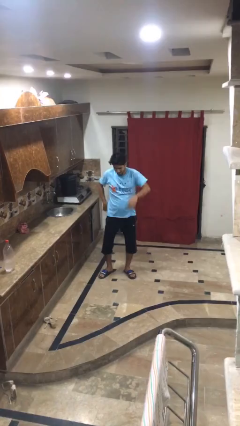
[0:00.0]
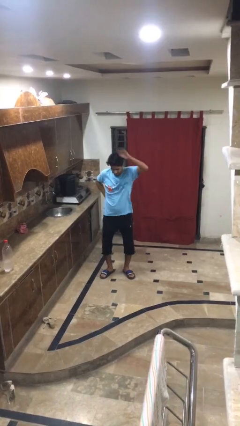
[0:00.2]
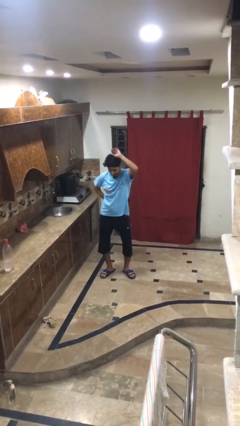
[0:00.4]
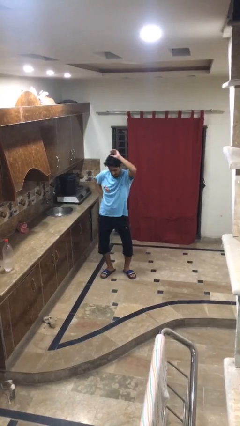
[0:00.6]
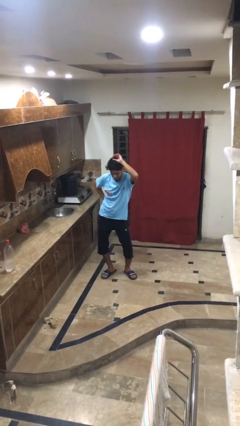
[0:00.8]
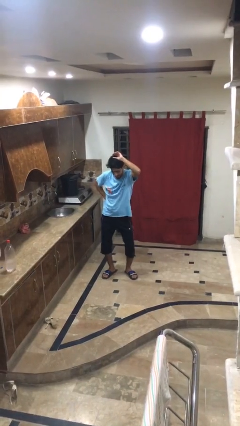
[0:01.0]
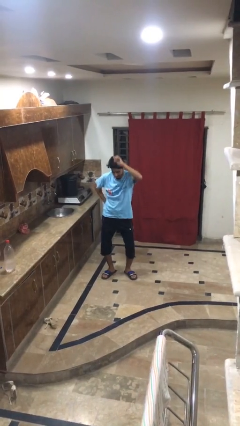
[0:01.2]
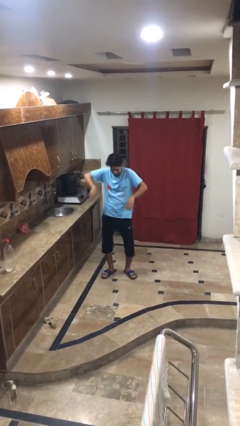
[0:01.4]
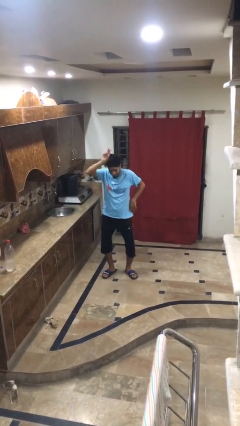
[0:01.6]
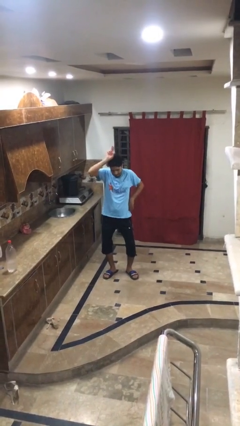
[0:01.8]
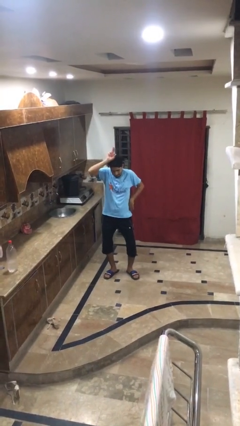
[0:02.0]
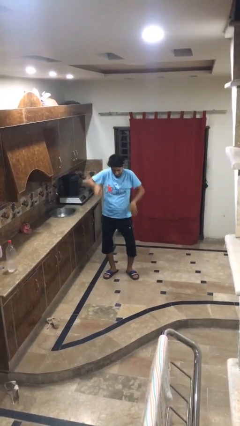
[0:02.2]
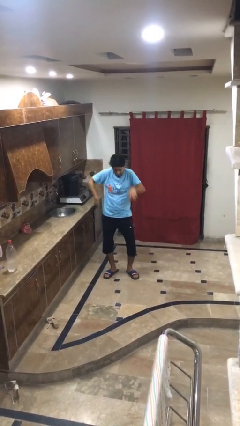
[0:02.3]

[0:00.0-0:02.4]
person dances in place

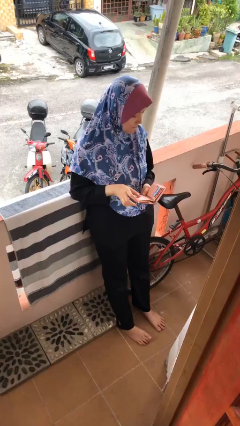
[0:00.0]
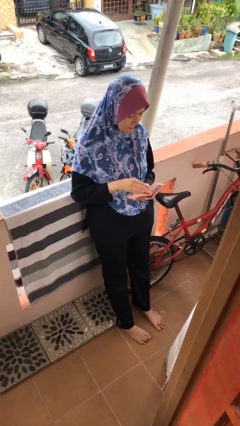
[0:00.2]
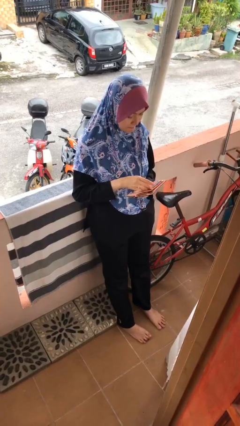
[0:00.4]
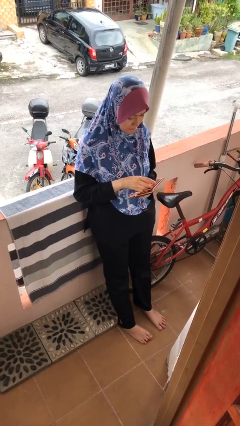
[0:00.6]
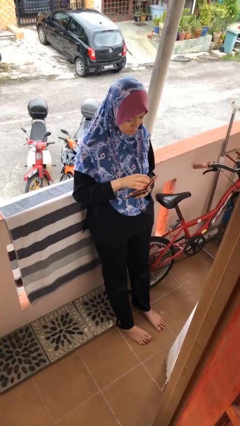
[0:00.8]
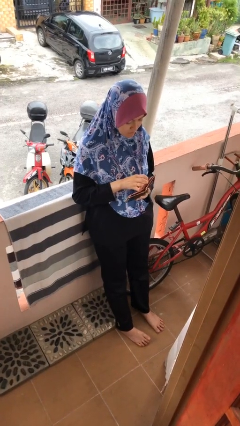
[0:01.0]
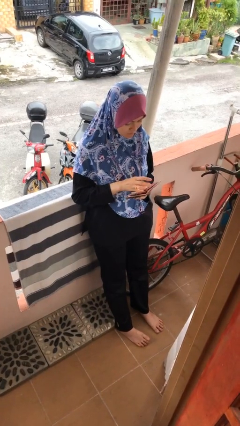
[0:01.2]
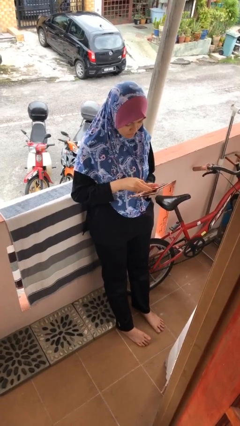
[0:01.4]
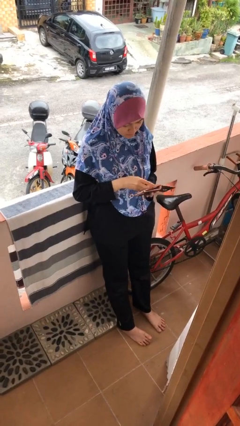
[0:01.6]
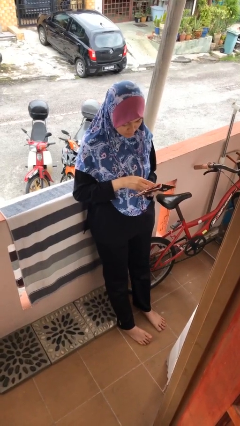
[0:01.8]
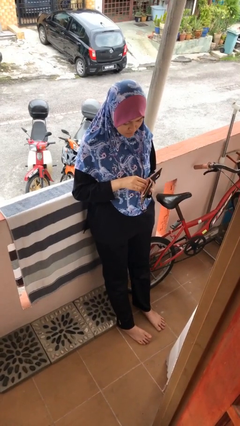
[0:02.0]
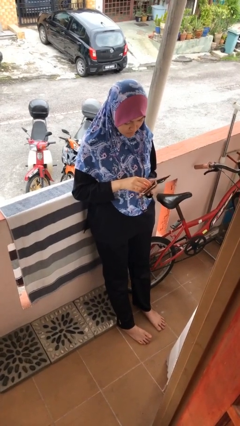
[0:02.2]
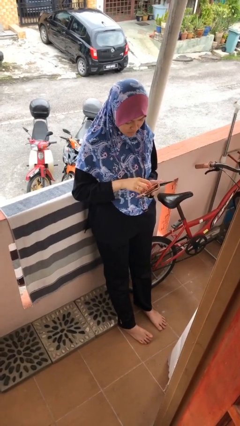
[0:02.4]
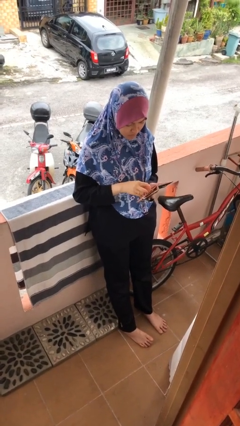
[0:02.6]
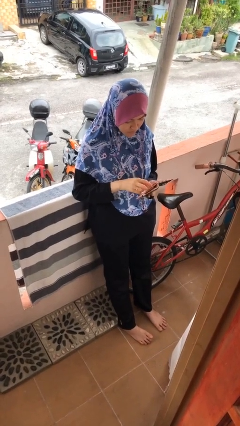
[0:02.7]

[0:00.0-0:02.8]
person searches in purse

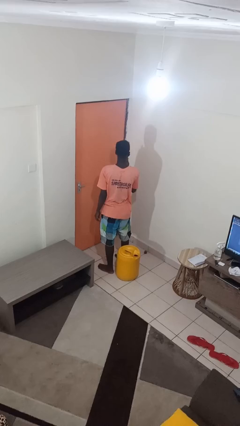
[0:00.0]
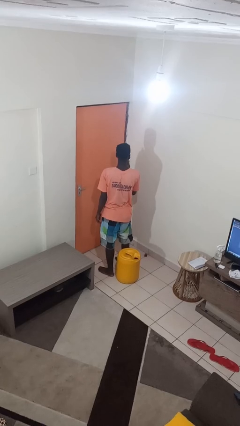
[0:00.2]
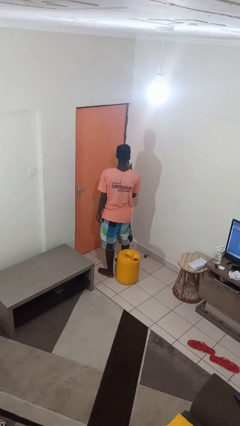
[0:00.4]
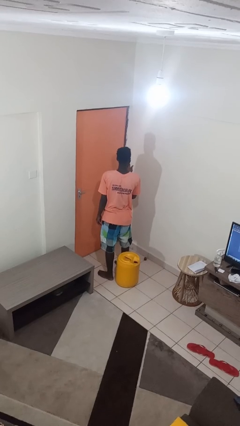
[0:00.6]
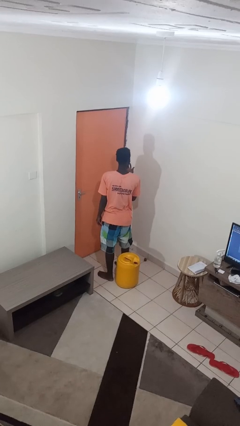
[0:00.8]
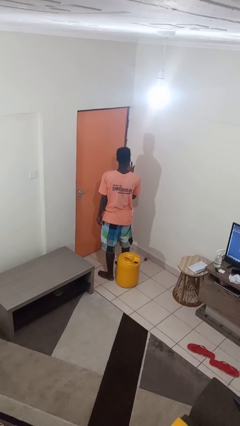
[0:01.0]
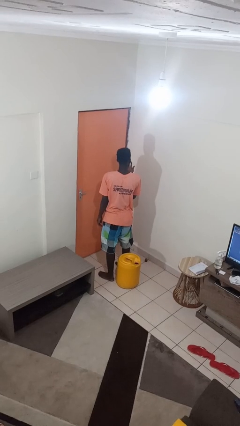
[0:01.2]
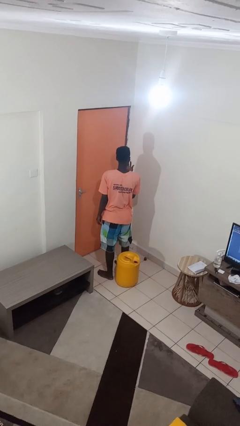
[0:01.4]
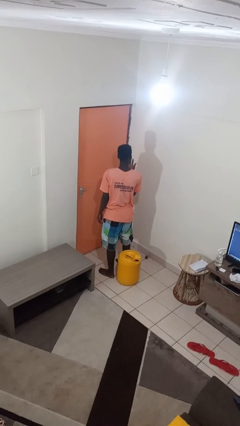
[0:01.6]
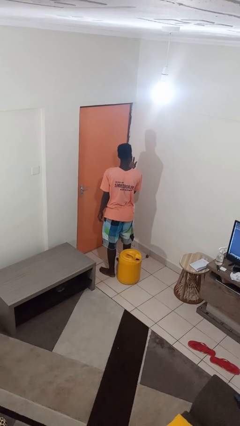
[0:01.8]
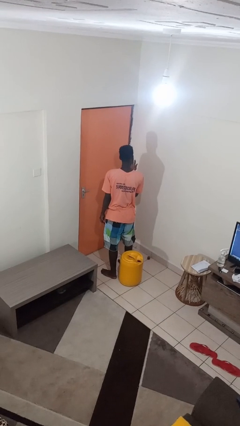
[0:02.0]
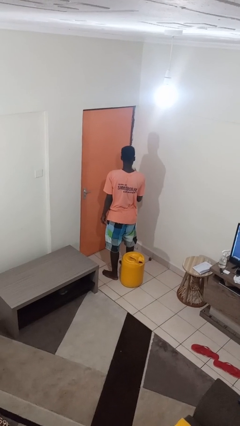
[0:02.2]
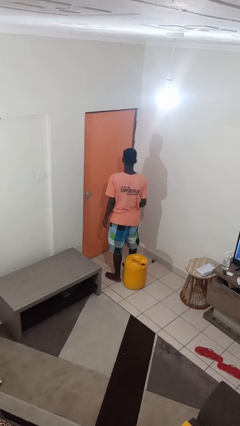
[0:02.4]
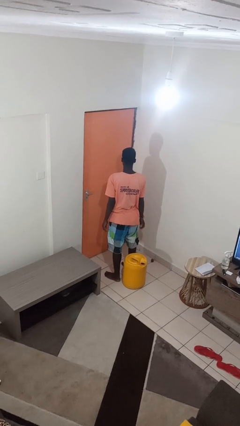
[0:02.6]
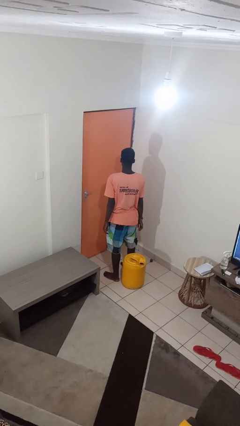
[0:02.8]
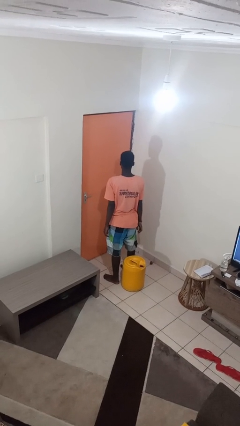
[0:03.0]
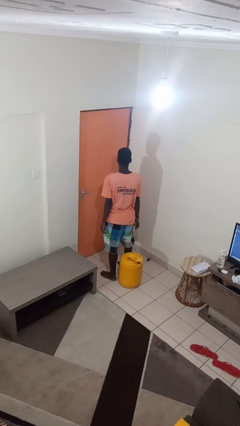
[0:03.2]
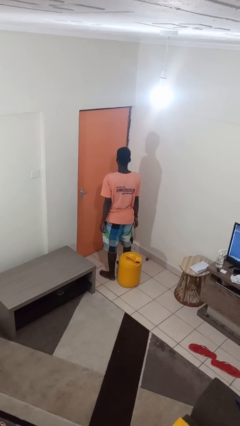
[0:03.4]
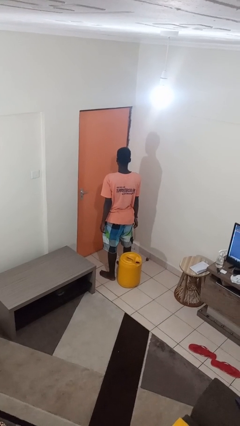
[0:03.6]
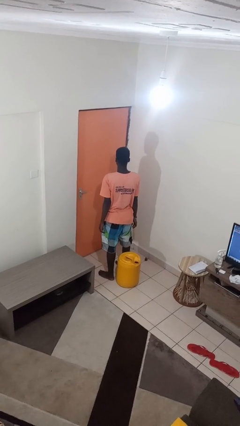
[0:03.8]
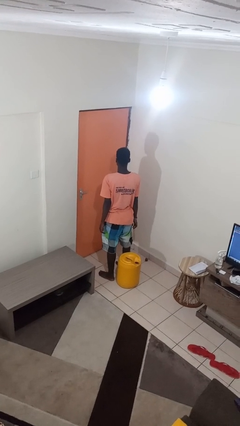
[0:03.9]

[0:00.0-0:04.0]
person licks fingers

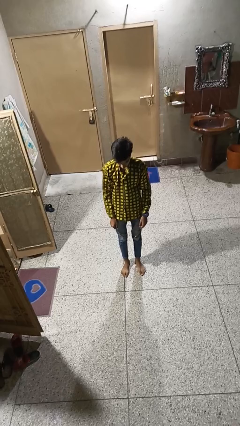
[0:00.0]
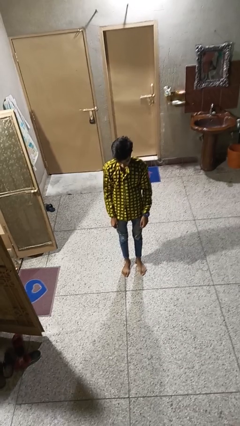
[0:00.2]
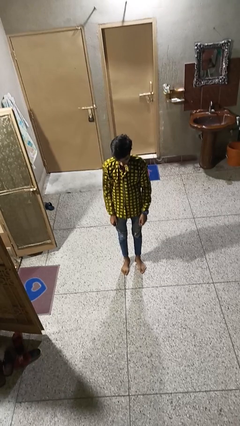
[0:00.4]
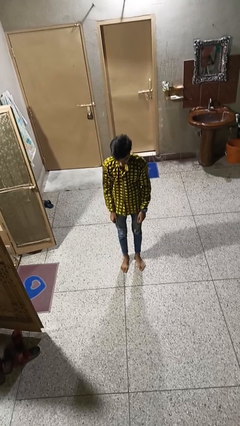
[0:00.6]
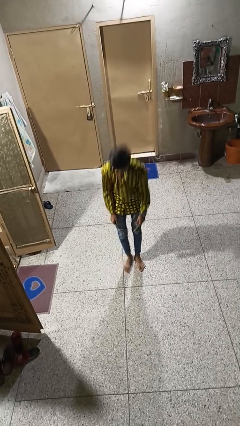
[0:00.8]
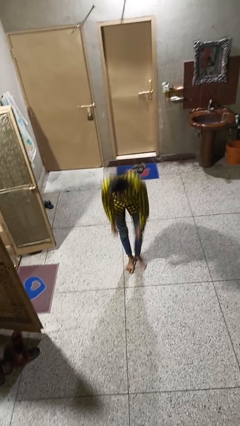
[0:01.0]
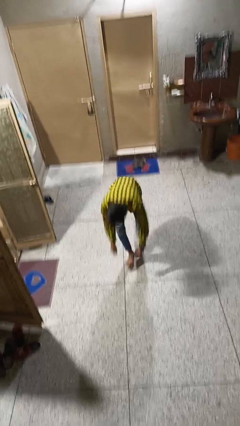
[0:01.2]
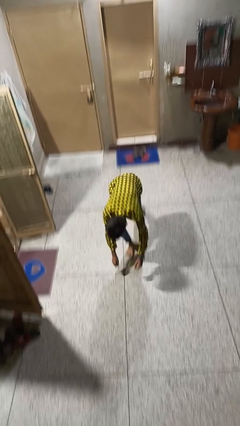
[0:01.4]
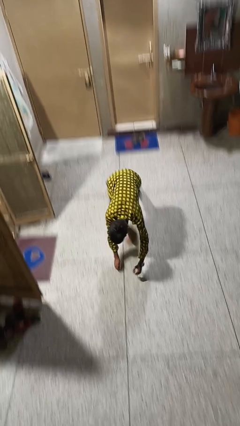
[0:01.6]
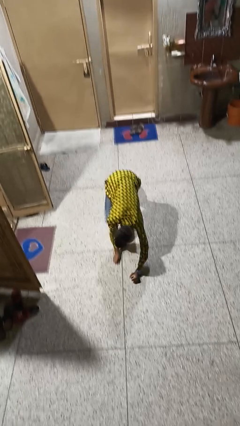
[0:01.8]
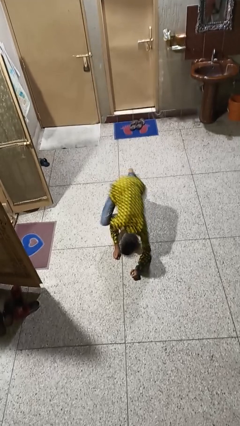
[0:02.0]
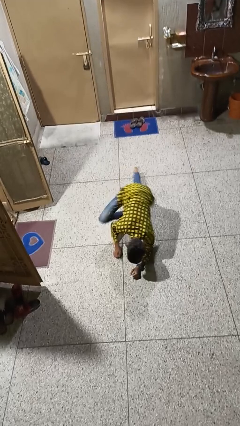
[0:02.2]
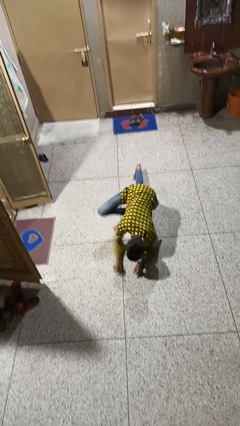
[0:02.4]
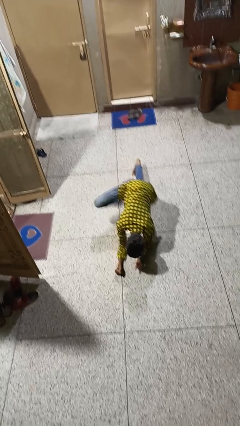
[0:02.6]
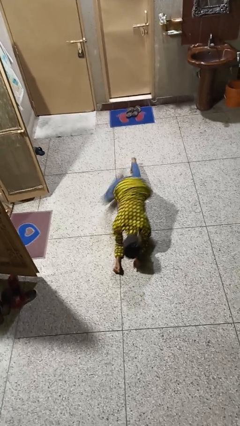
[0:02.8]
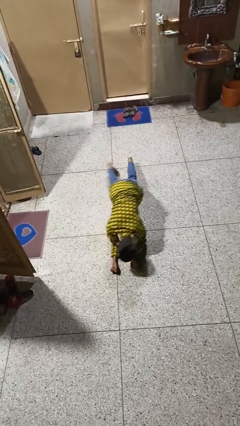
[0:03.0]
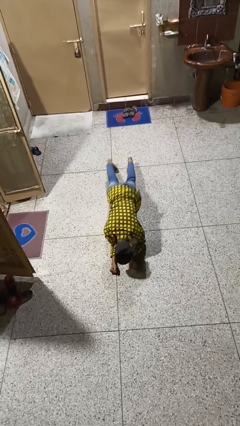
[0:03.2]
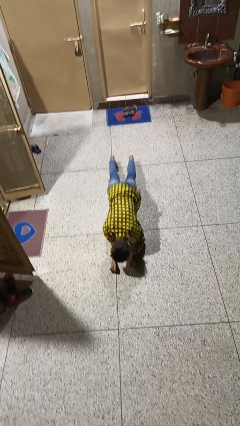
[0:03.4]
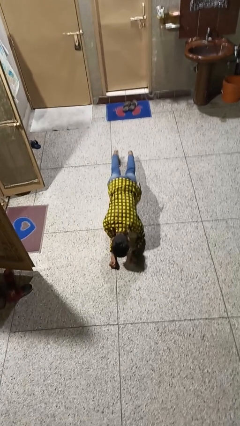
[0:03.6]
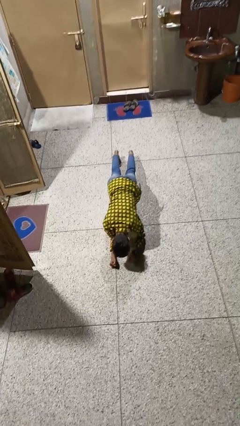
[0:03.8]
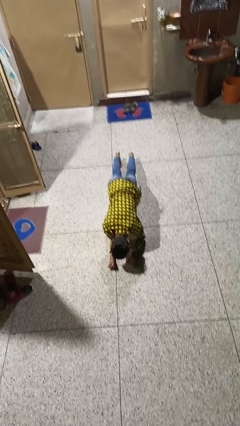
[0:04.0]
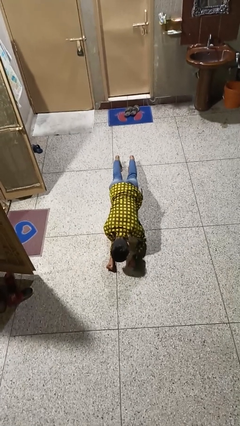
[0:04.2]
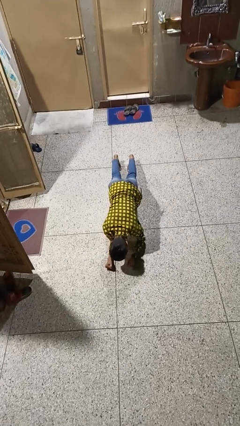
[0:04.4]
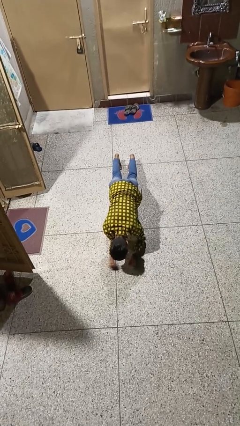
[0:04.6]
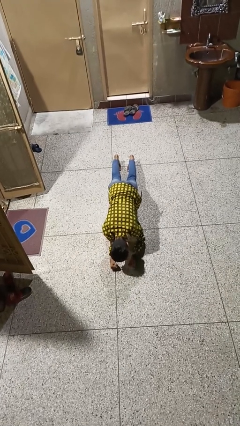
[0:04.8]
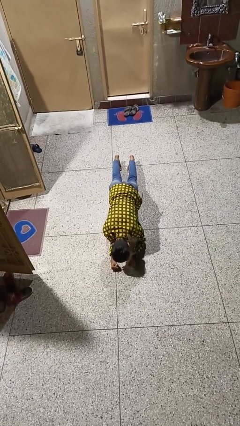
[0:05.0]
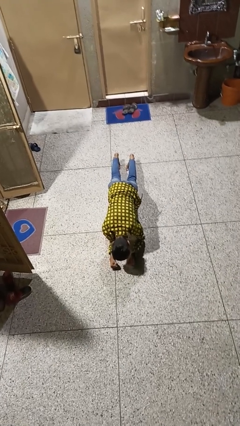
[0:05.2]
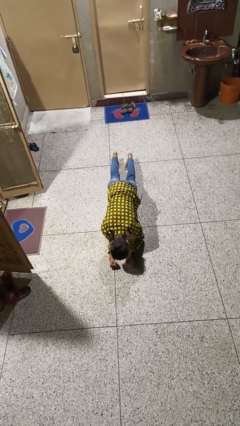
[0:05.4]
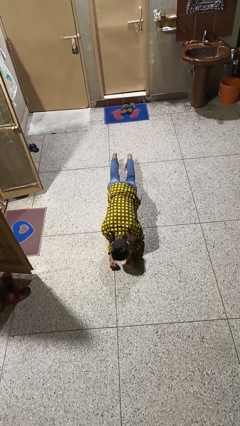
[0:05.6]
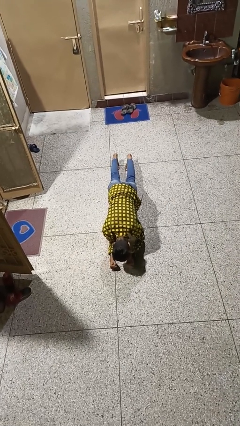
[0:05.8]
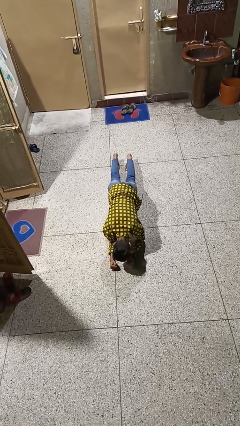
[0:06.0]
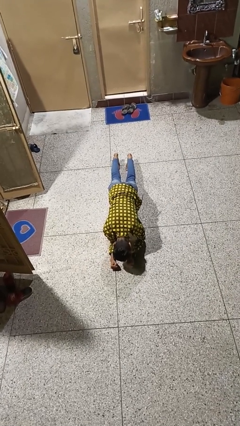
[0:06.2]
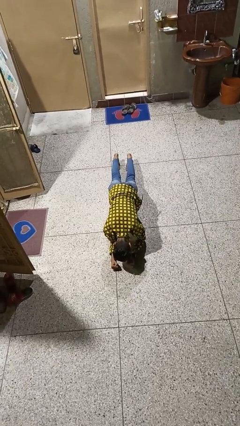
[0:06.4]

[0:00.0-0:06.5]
person exercises with plank

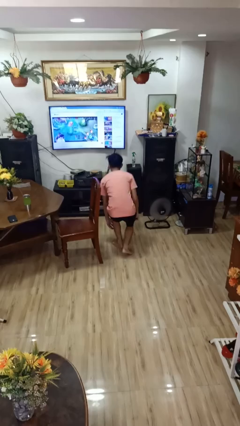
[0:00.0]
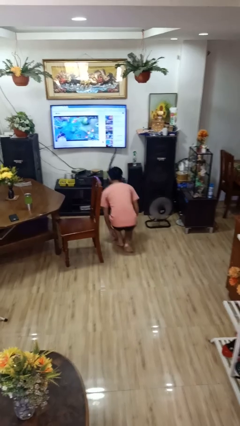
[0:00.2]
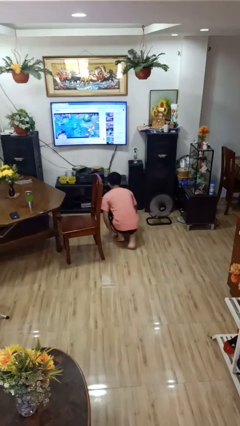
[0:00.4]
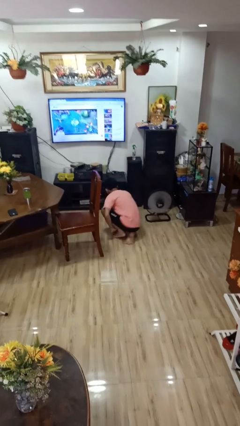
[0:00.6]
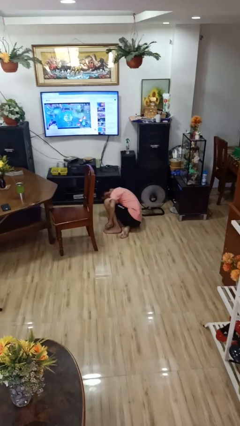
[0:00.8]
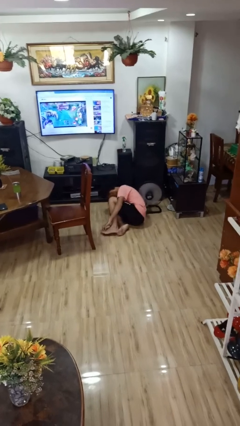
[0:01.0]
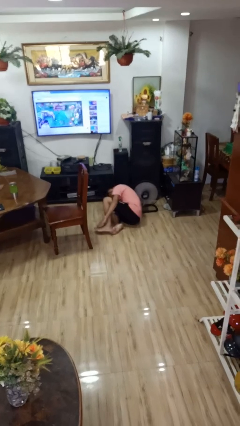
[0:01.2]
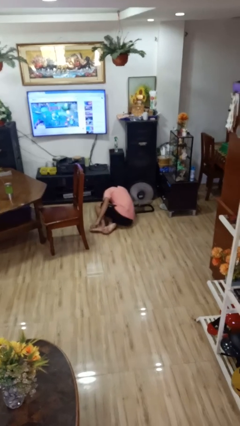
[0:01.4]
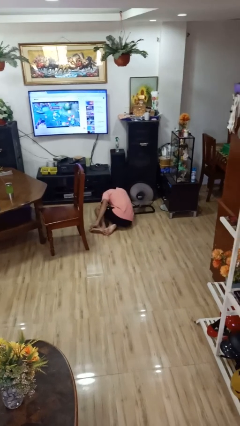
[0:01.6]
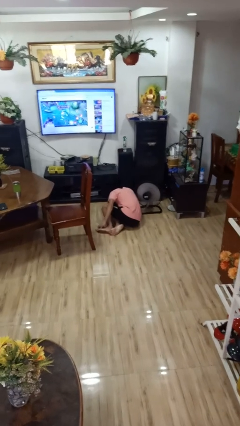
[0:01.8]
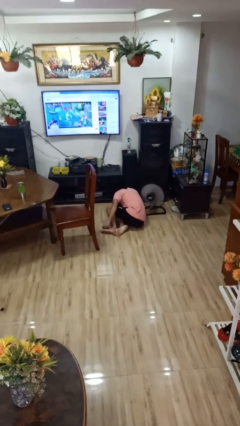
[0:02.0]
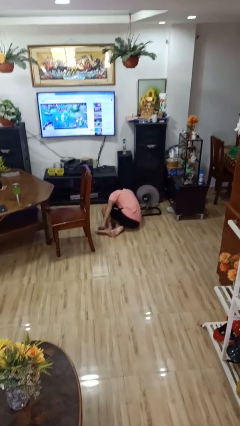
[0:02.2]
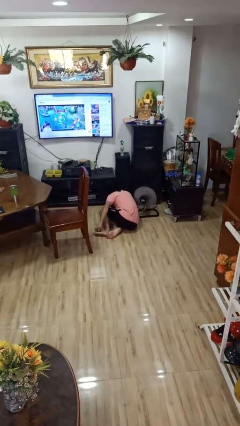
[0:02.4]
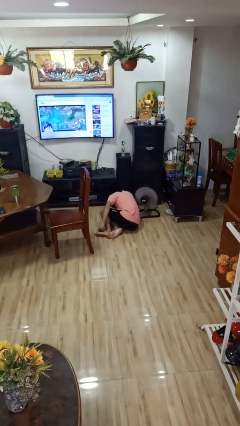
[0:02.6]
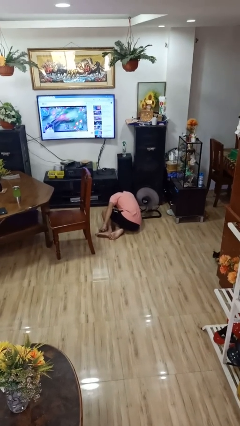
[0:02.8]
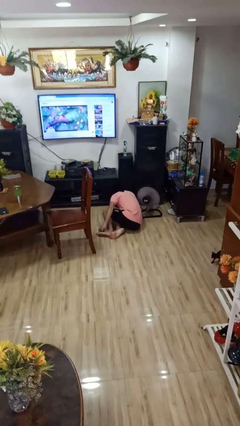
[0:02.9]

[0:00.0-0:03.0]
person lies down on floor
